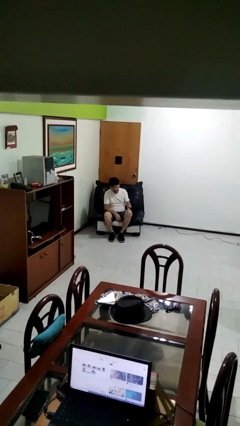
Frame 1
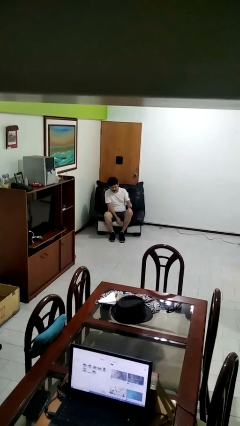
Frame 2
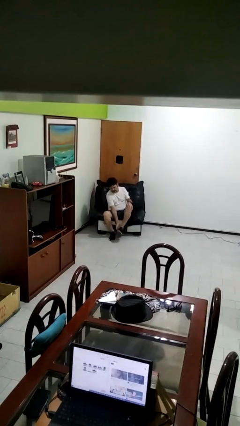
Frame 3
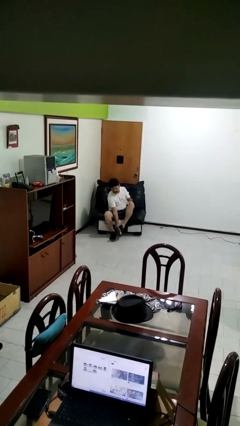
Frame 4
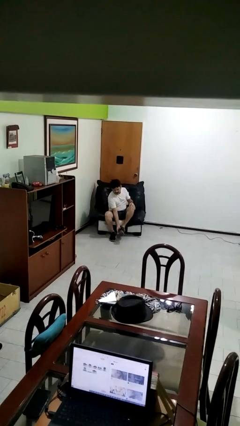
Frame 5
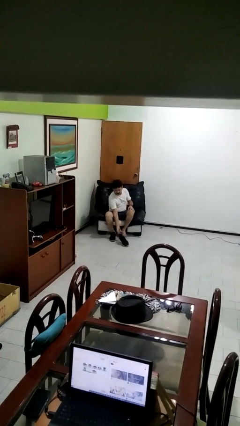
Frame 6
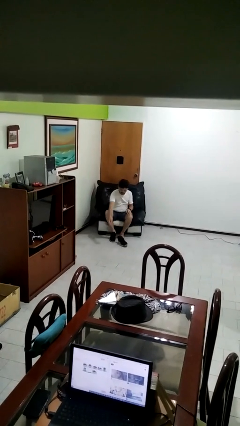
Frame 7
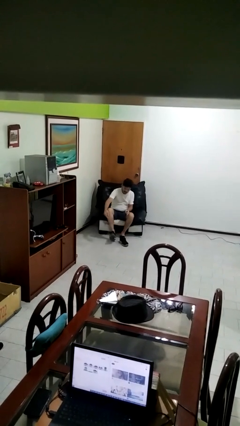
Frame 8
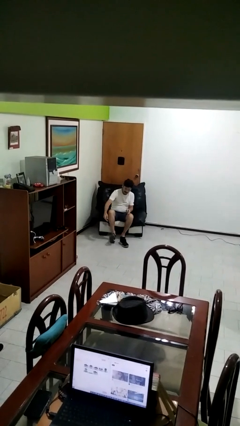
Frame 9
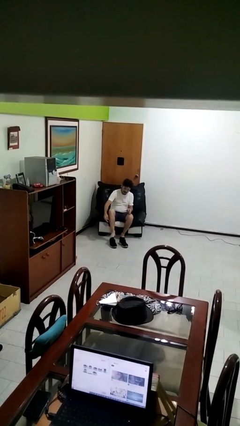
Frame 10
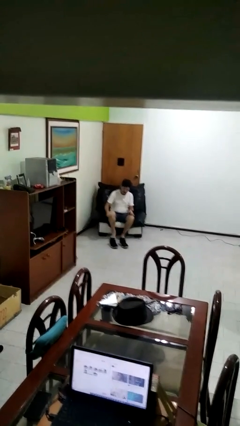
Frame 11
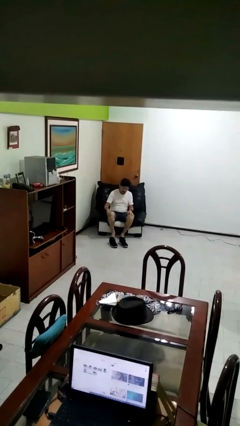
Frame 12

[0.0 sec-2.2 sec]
person takes off shoes

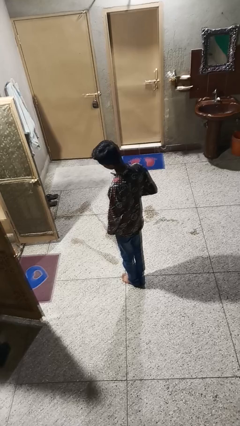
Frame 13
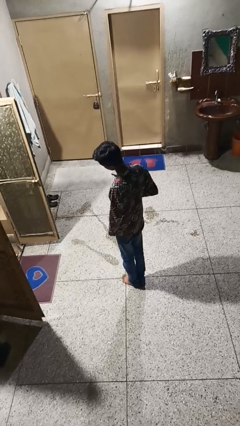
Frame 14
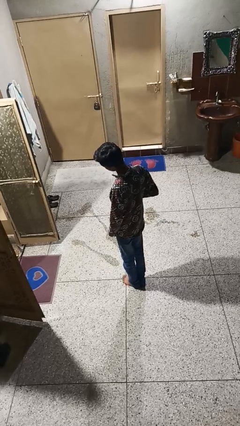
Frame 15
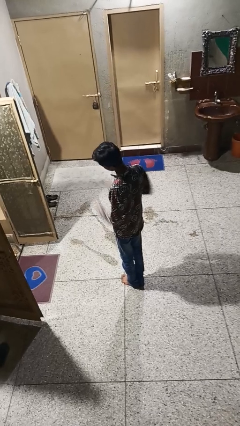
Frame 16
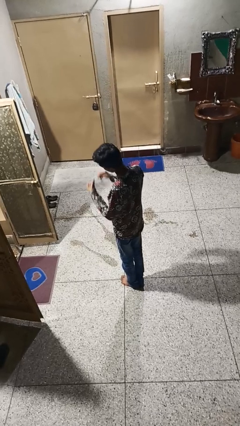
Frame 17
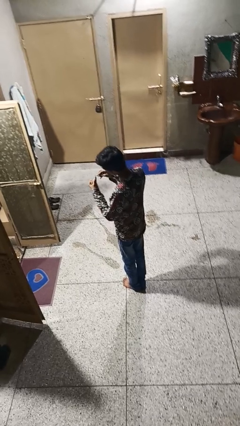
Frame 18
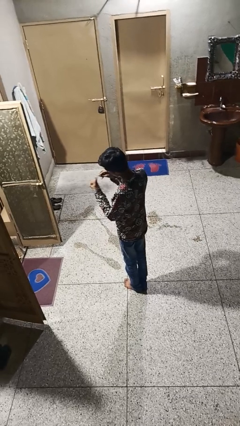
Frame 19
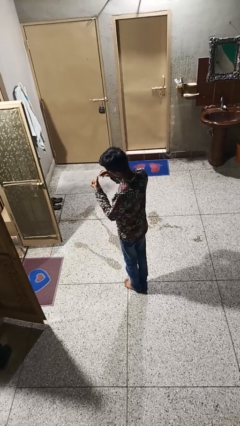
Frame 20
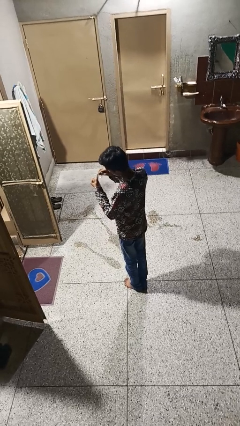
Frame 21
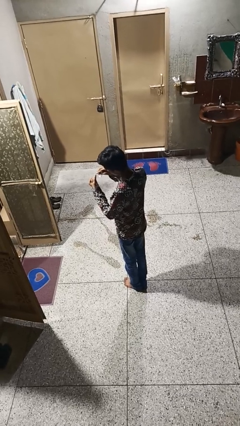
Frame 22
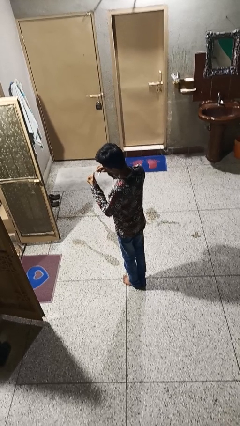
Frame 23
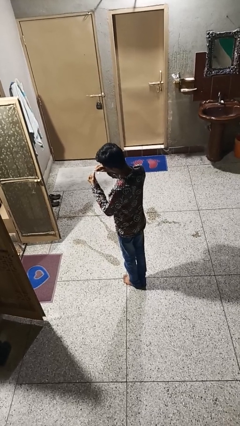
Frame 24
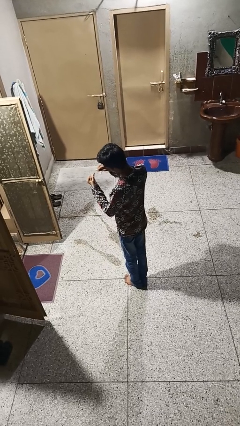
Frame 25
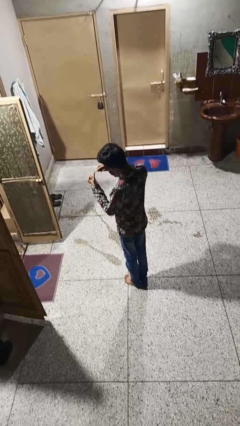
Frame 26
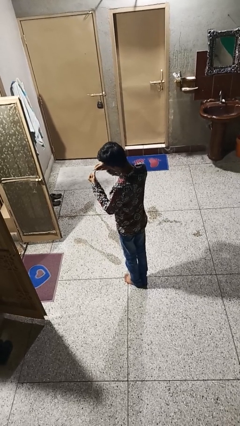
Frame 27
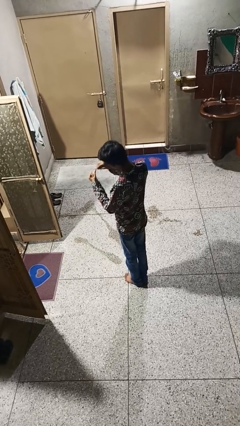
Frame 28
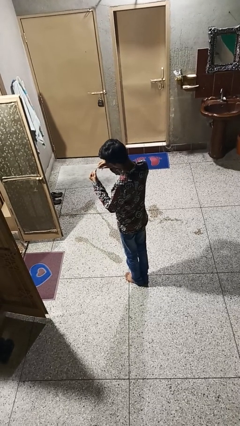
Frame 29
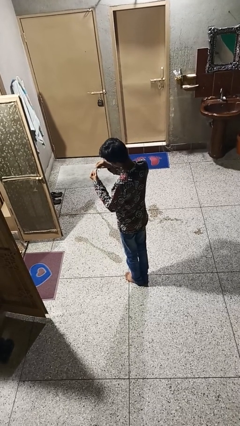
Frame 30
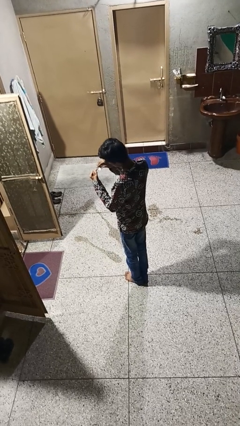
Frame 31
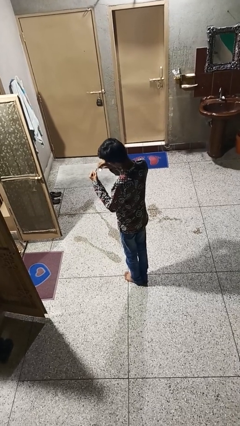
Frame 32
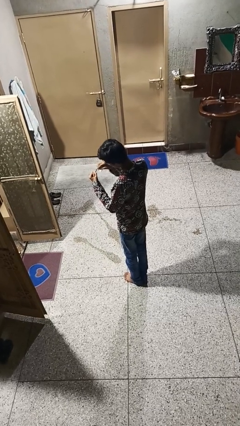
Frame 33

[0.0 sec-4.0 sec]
person files fingernails

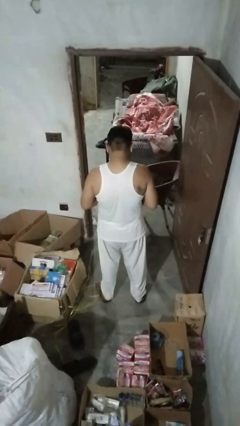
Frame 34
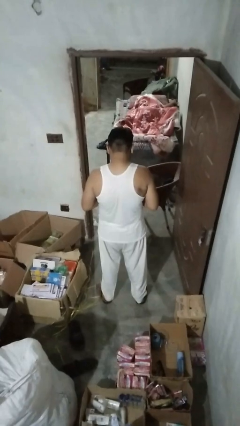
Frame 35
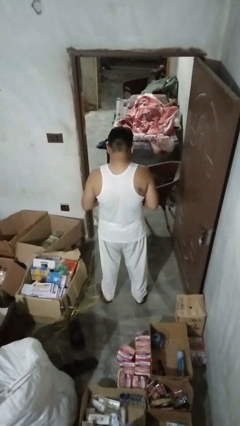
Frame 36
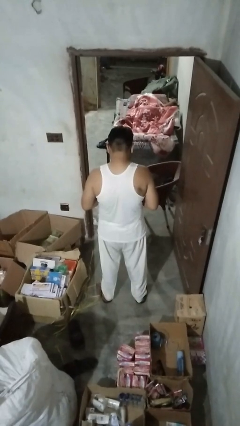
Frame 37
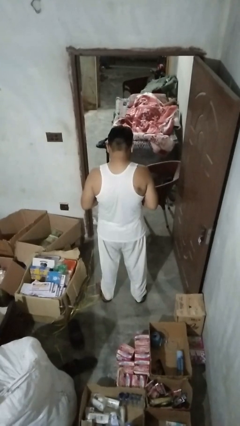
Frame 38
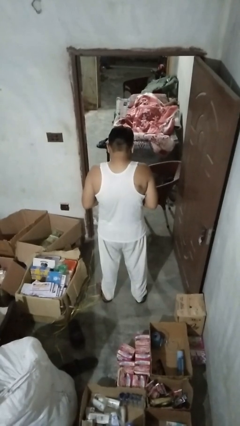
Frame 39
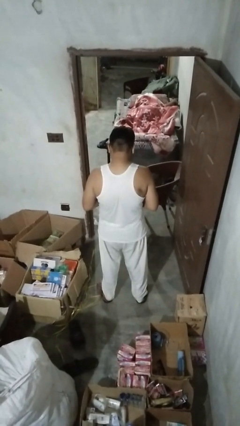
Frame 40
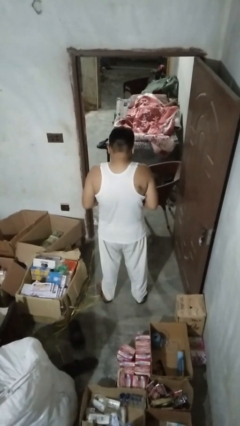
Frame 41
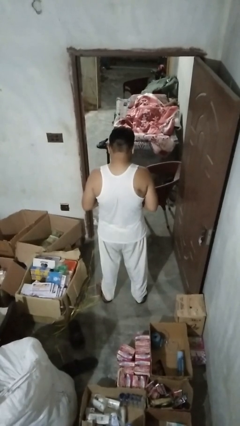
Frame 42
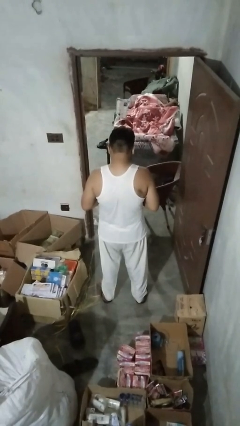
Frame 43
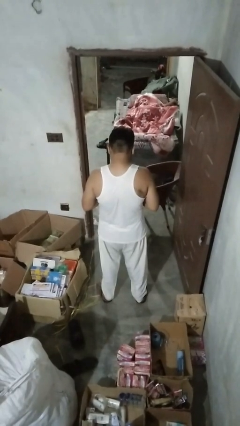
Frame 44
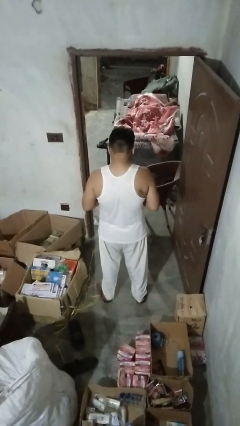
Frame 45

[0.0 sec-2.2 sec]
person shrugs

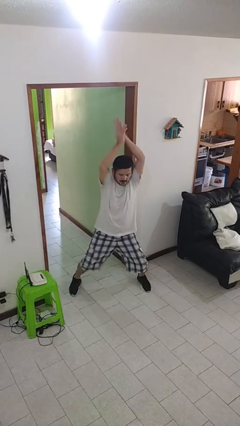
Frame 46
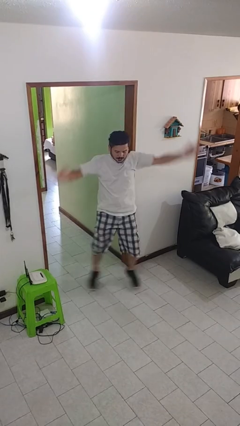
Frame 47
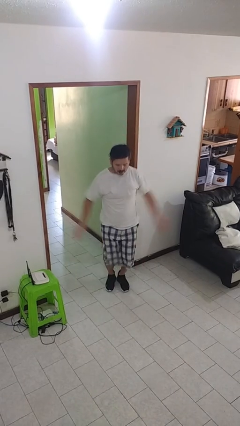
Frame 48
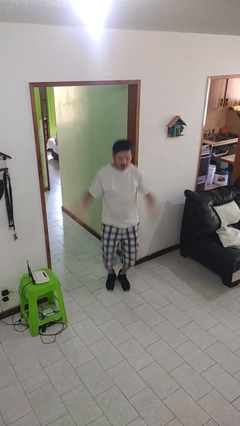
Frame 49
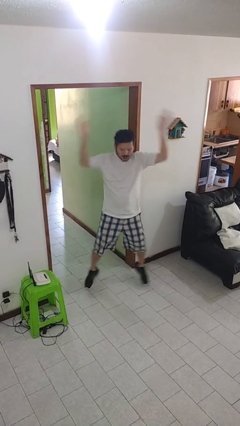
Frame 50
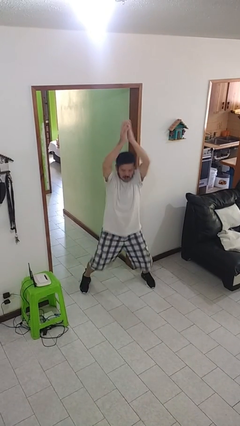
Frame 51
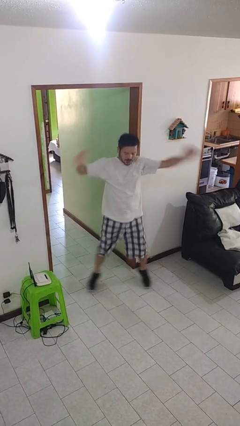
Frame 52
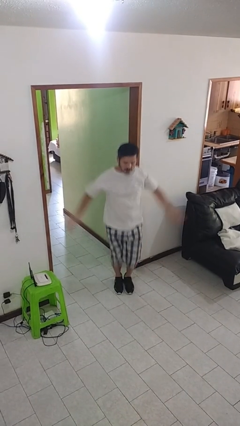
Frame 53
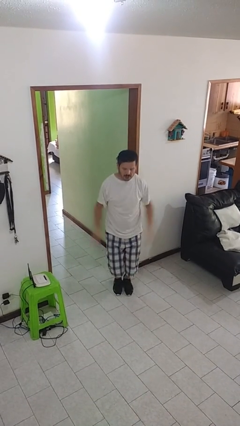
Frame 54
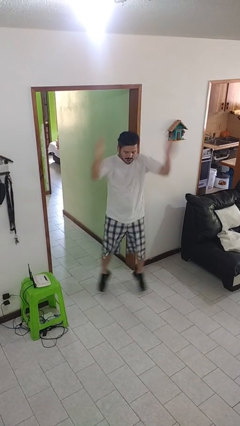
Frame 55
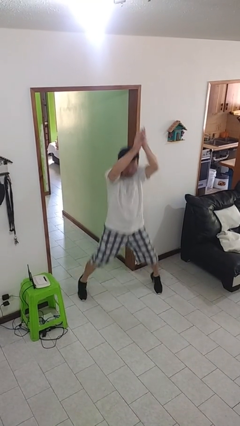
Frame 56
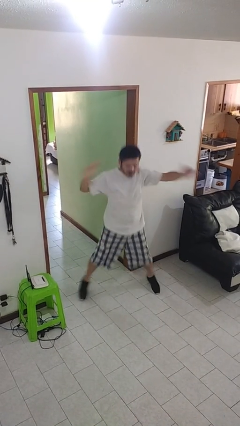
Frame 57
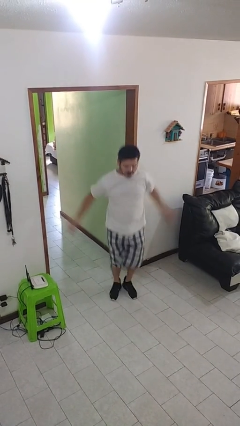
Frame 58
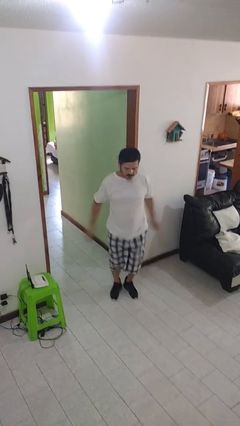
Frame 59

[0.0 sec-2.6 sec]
person exercises with jumping jacks

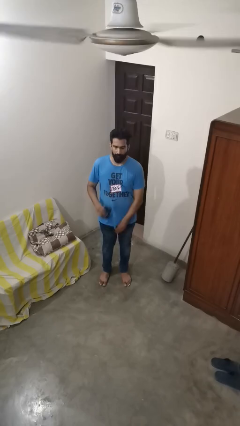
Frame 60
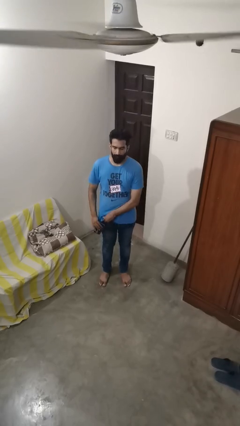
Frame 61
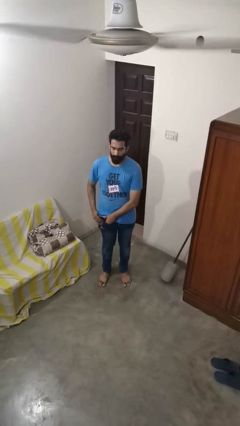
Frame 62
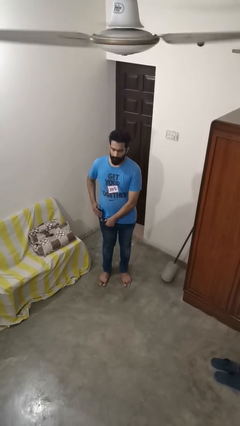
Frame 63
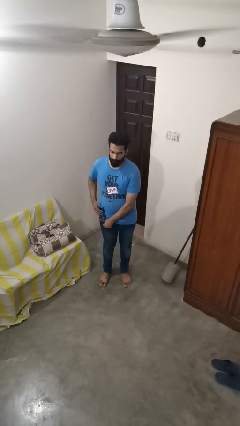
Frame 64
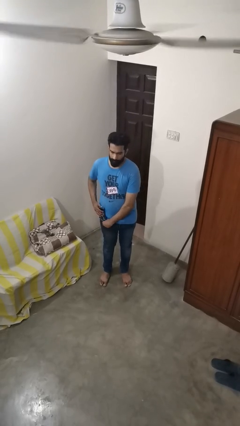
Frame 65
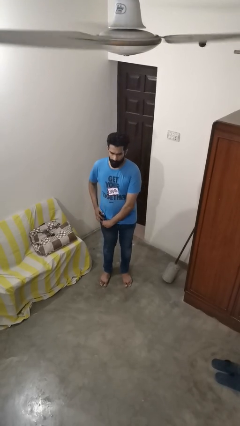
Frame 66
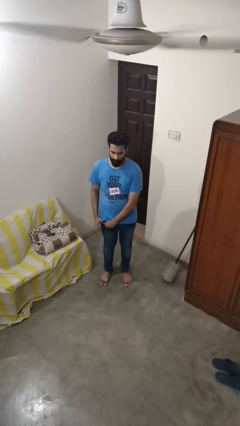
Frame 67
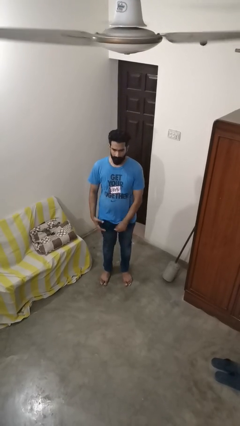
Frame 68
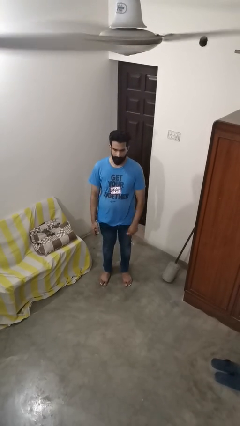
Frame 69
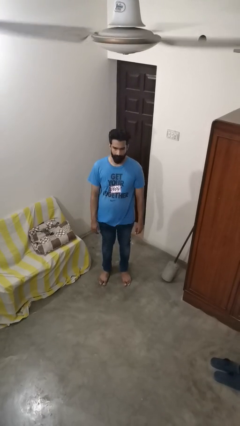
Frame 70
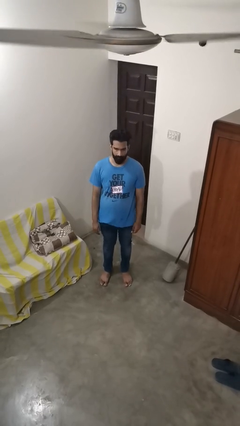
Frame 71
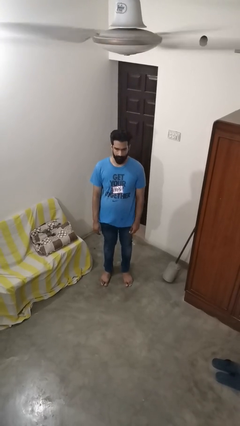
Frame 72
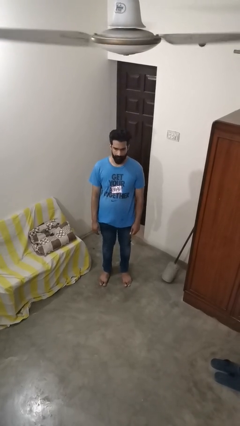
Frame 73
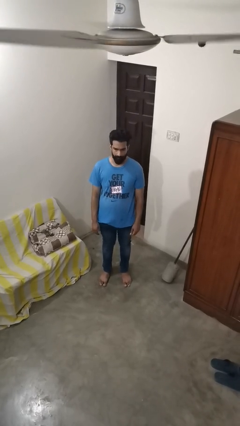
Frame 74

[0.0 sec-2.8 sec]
person puts phone into pocket

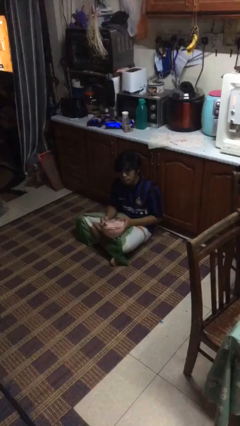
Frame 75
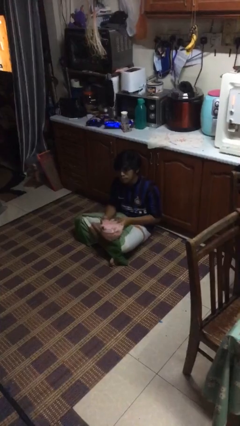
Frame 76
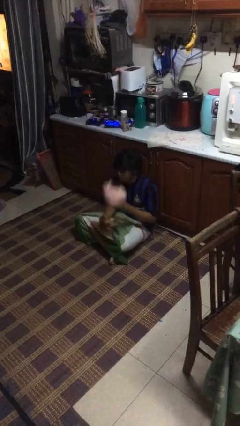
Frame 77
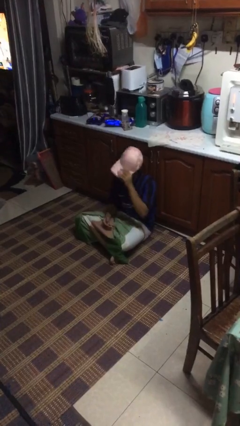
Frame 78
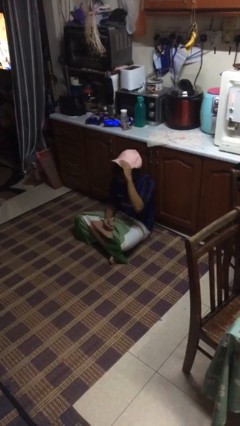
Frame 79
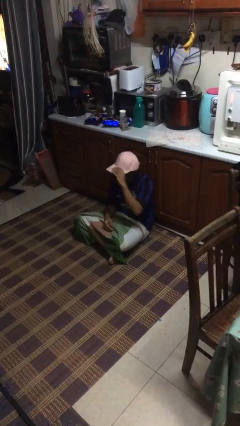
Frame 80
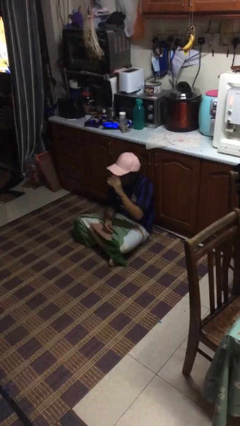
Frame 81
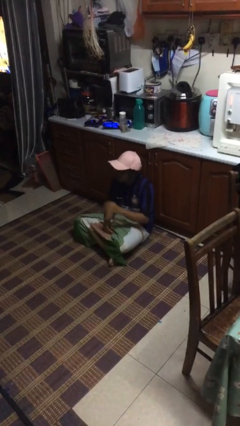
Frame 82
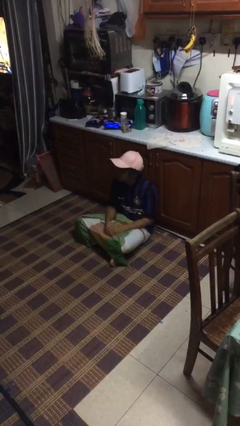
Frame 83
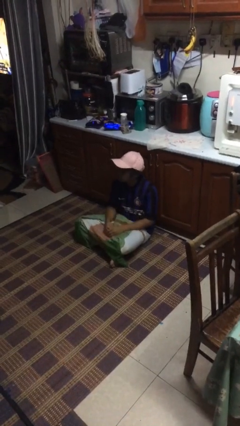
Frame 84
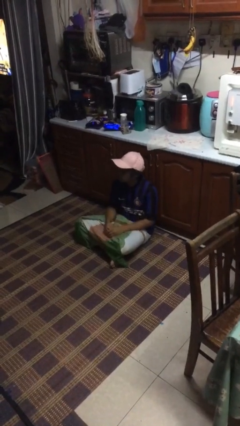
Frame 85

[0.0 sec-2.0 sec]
person puts on hat

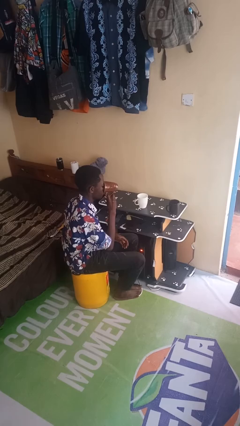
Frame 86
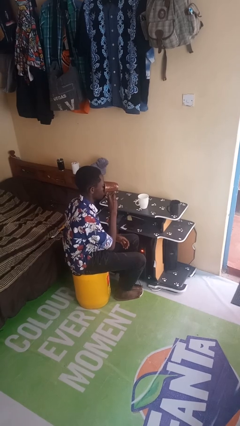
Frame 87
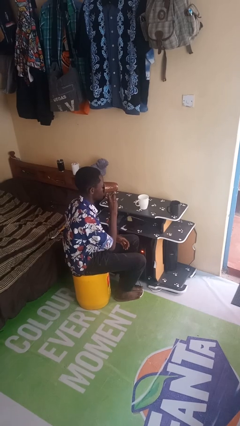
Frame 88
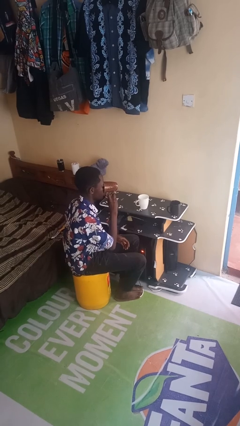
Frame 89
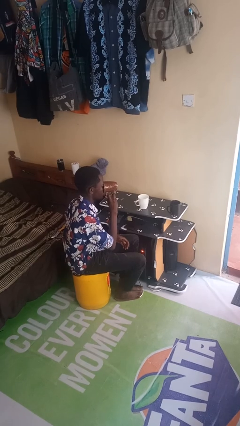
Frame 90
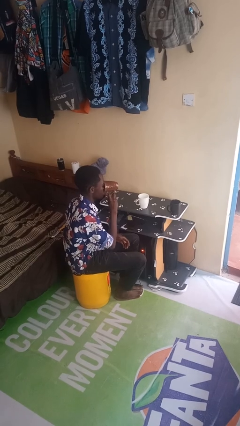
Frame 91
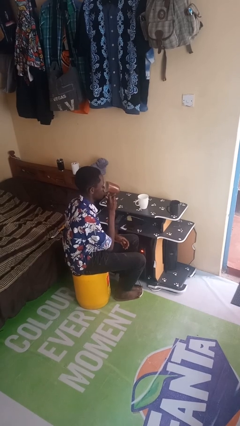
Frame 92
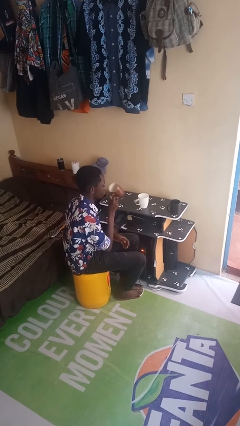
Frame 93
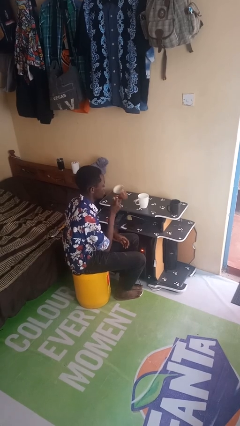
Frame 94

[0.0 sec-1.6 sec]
person drinks from shotglass
